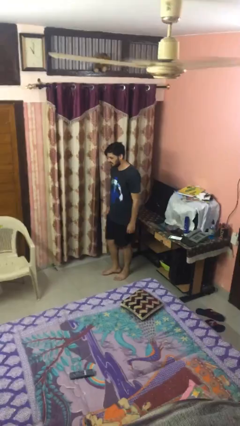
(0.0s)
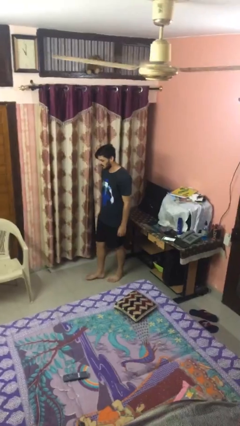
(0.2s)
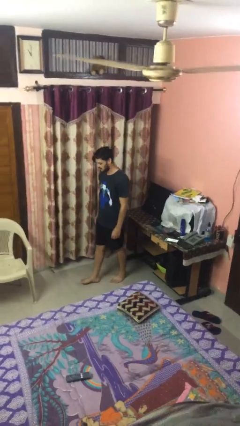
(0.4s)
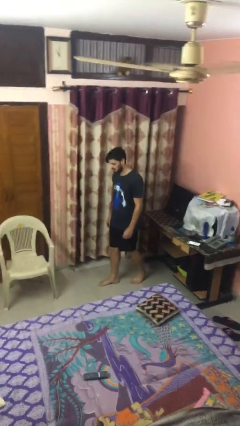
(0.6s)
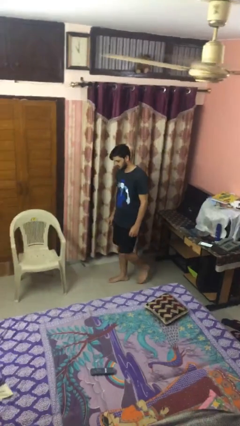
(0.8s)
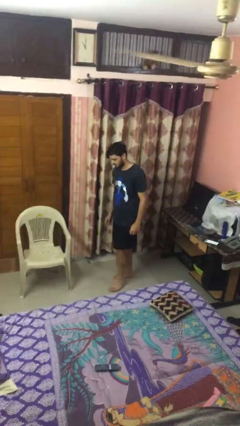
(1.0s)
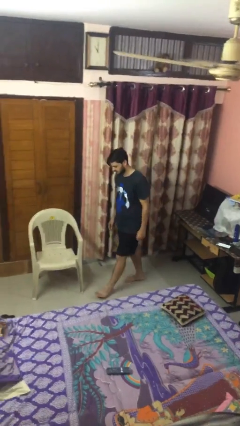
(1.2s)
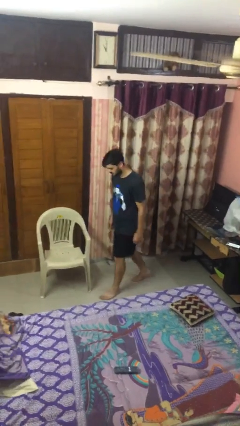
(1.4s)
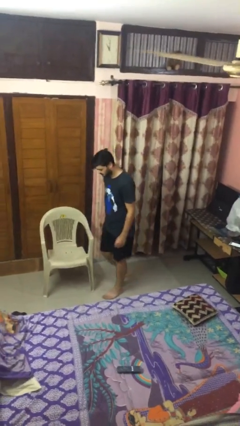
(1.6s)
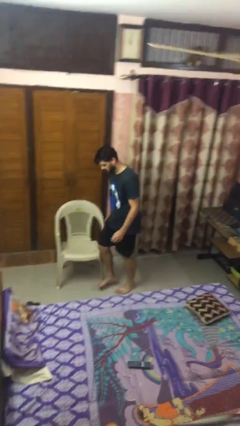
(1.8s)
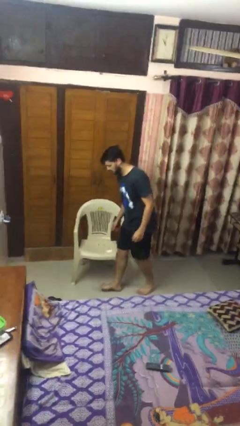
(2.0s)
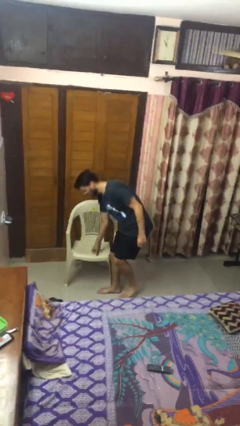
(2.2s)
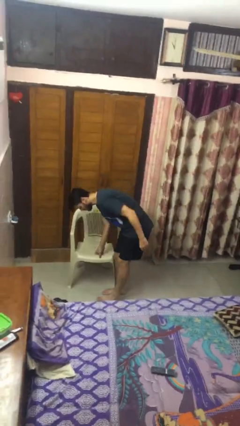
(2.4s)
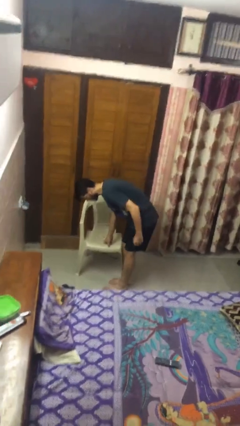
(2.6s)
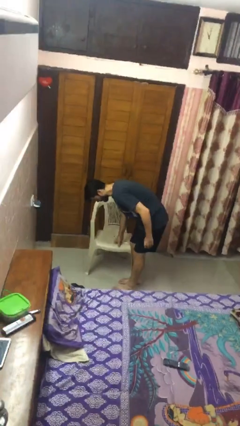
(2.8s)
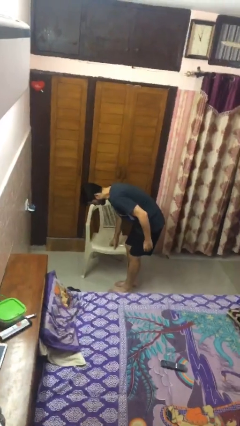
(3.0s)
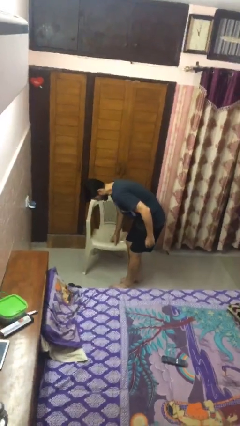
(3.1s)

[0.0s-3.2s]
person stubs toe

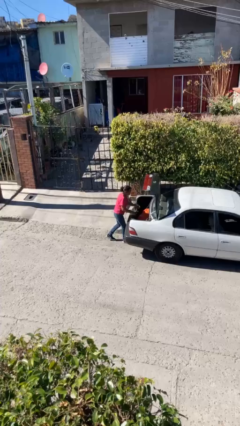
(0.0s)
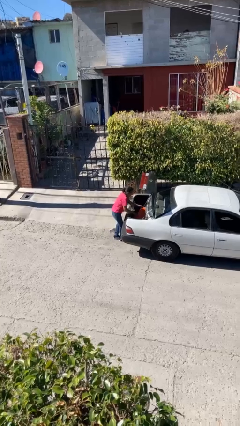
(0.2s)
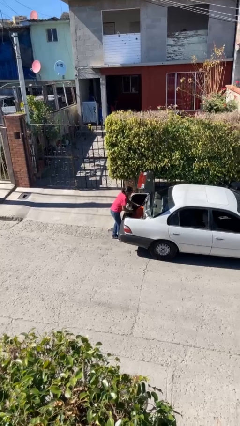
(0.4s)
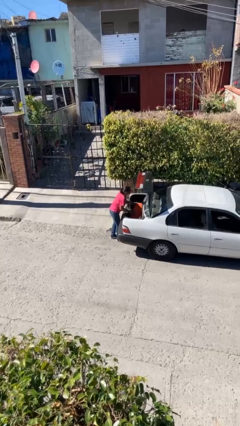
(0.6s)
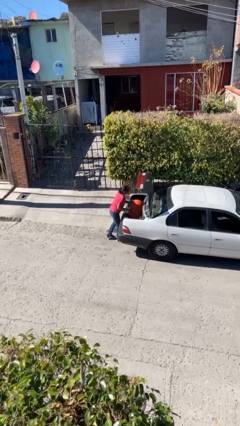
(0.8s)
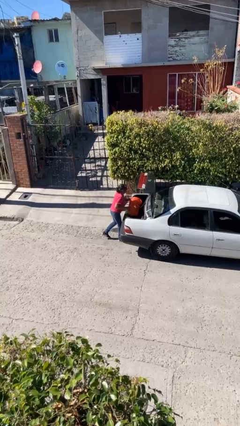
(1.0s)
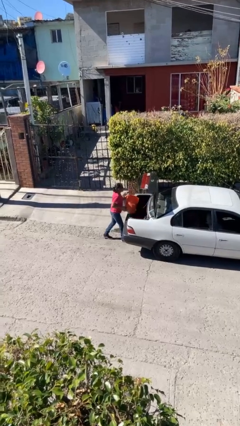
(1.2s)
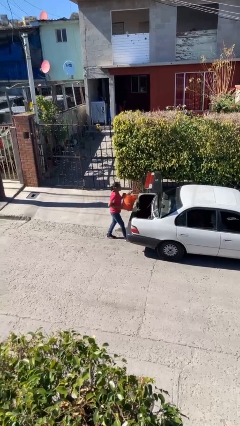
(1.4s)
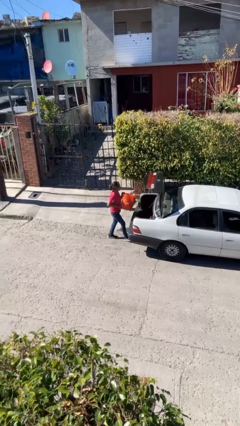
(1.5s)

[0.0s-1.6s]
person unloads car

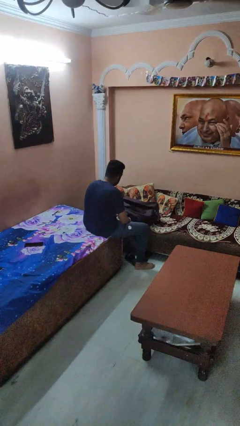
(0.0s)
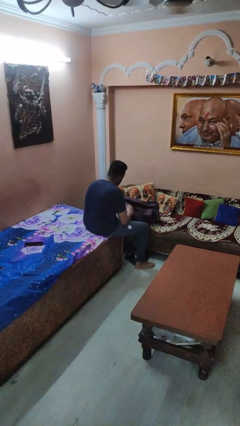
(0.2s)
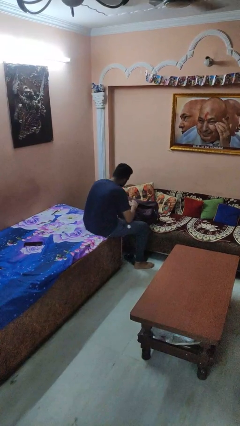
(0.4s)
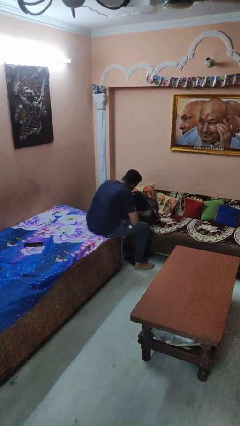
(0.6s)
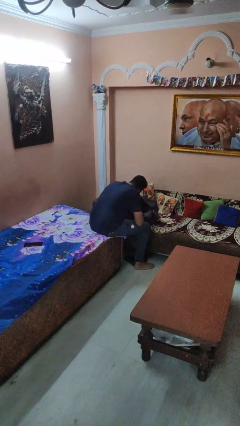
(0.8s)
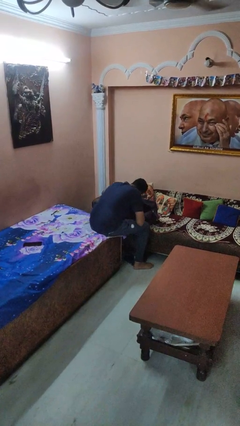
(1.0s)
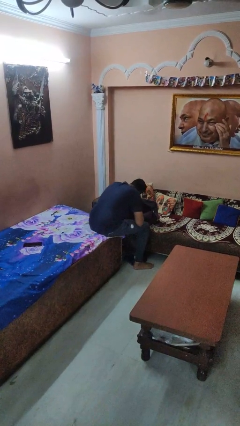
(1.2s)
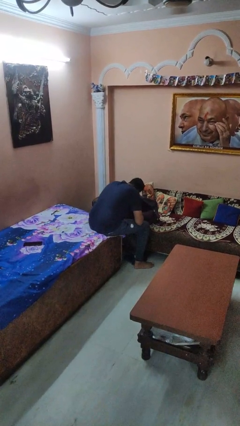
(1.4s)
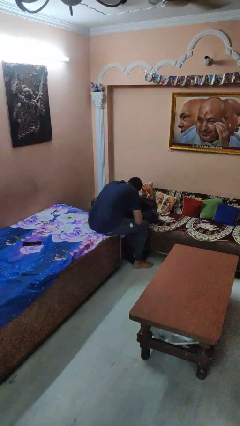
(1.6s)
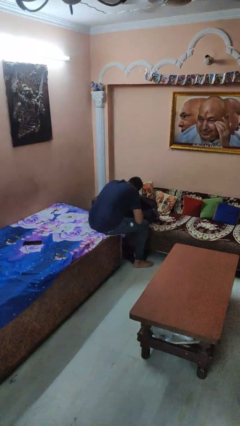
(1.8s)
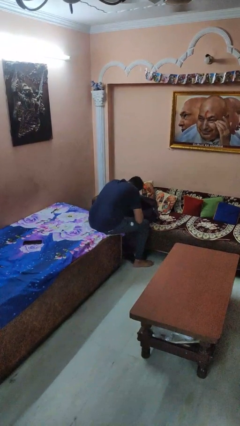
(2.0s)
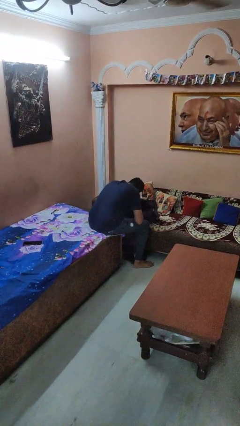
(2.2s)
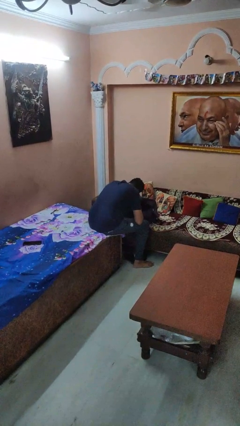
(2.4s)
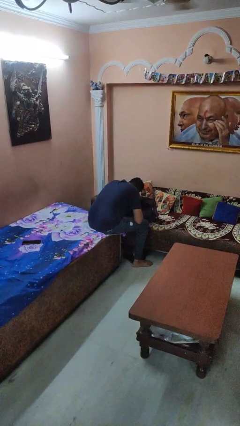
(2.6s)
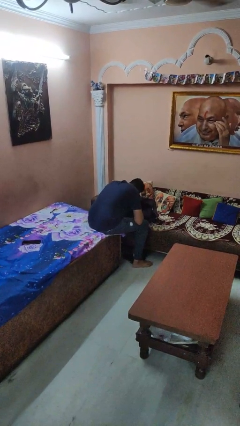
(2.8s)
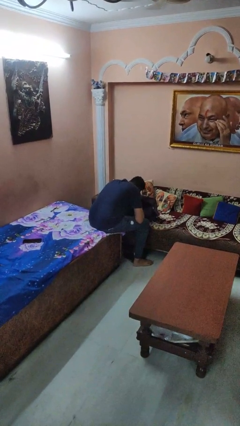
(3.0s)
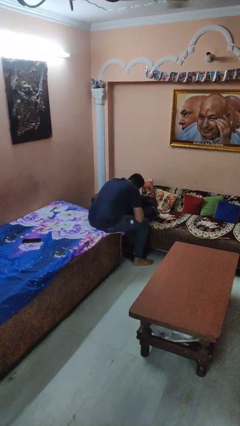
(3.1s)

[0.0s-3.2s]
person searches in bag

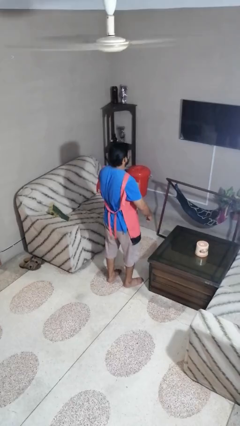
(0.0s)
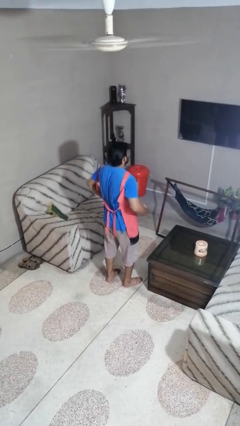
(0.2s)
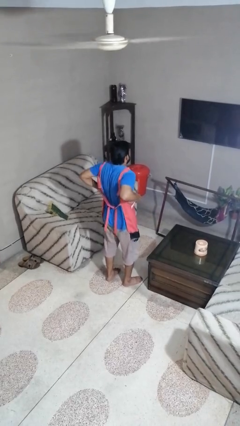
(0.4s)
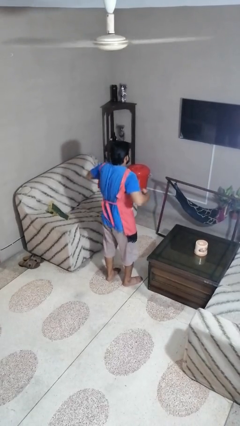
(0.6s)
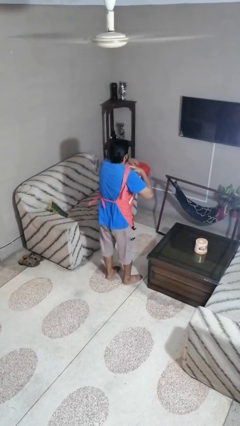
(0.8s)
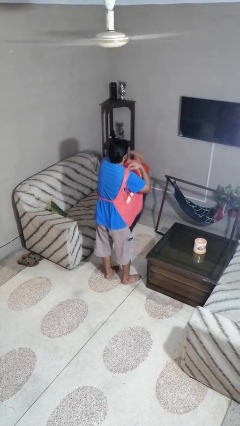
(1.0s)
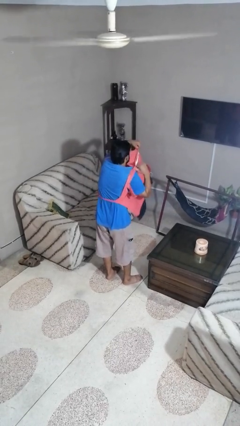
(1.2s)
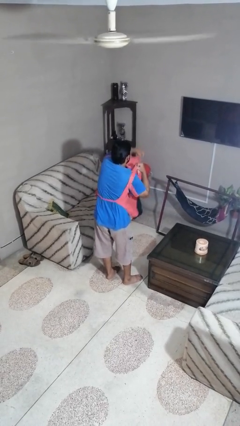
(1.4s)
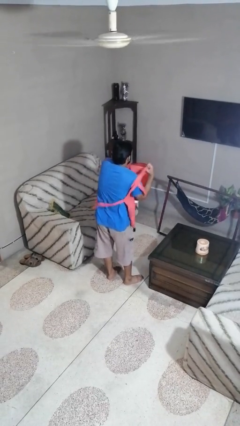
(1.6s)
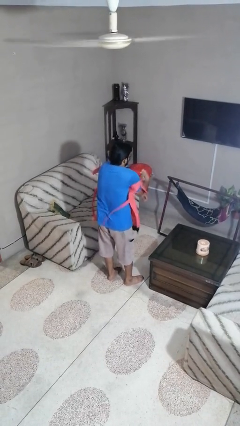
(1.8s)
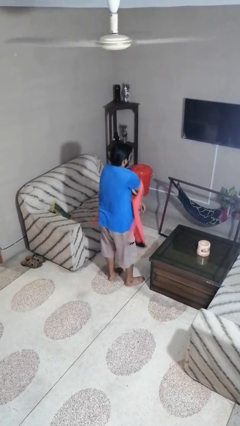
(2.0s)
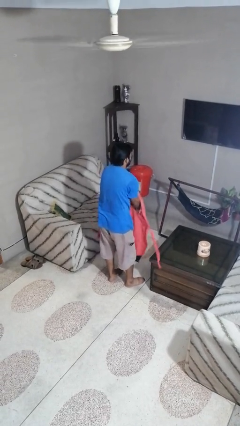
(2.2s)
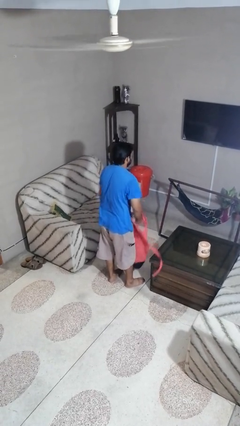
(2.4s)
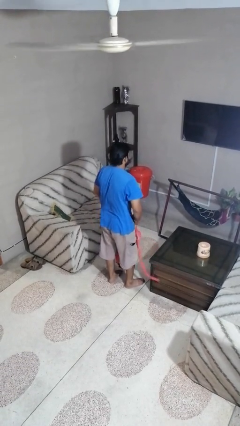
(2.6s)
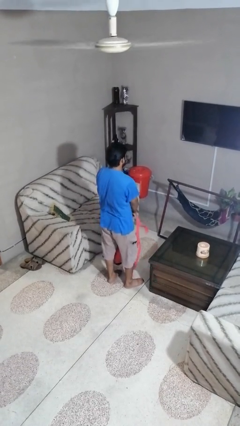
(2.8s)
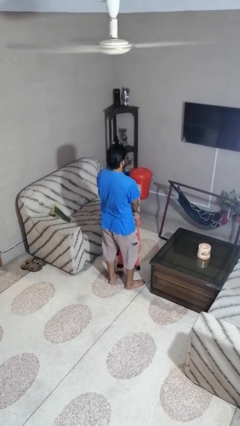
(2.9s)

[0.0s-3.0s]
person takes off apron

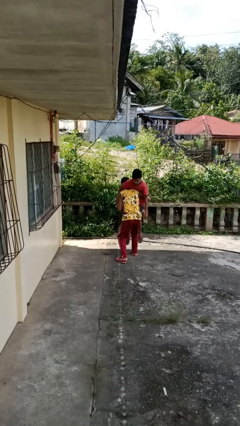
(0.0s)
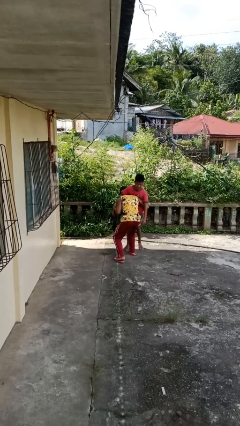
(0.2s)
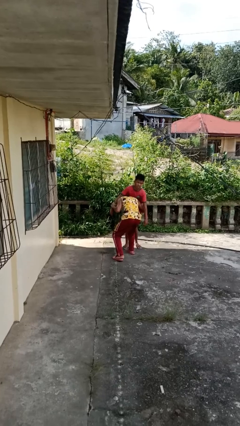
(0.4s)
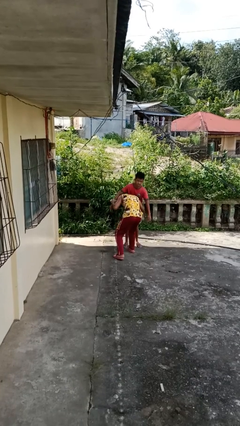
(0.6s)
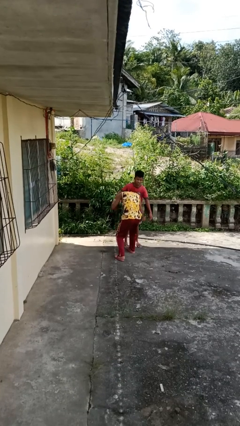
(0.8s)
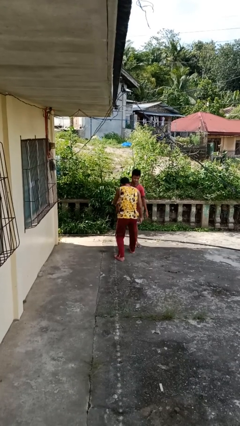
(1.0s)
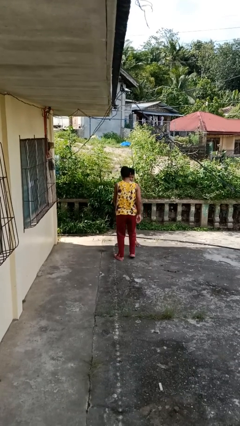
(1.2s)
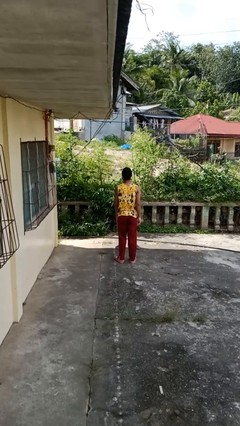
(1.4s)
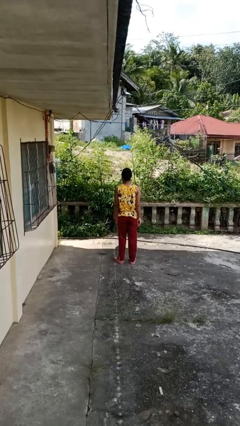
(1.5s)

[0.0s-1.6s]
person puts down person

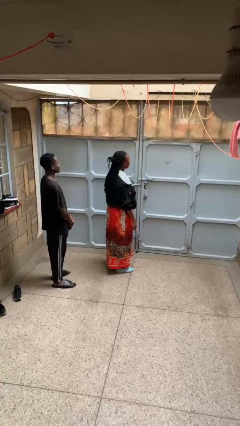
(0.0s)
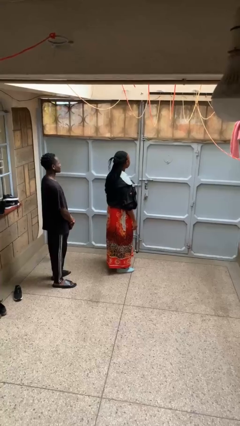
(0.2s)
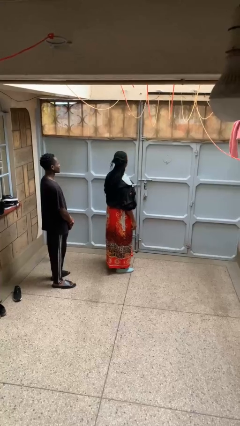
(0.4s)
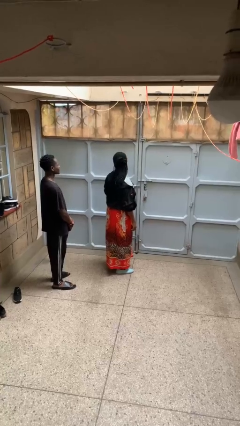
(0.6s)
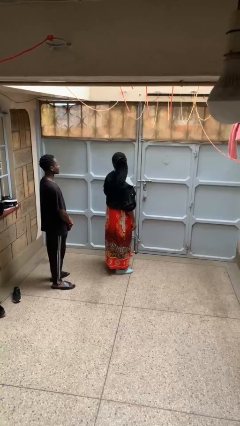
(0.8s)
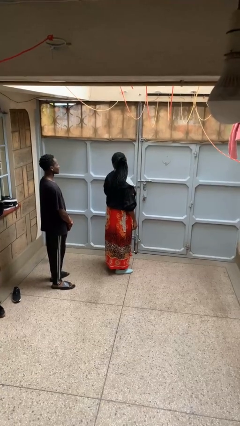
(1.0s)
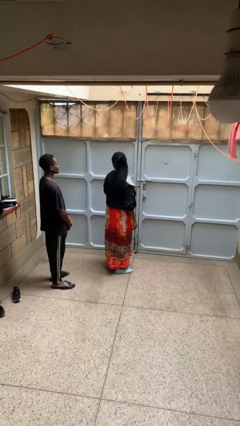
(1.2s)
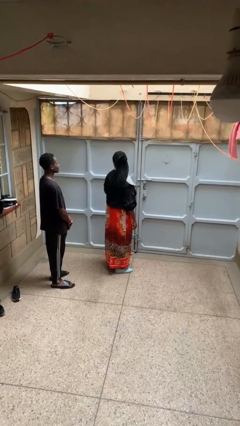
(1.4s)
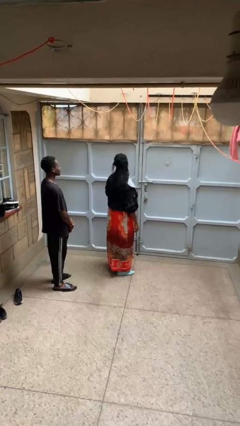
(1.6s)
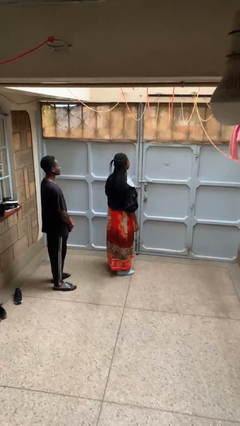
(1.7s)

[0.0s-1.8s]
person looks over shoulder

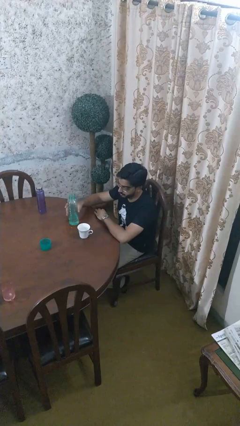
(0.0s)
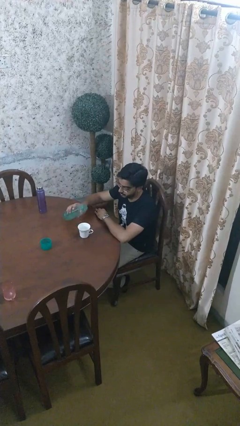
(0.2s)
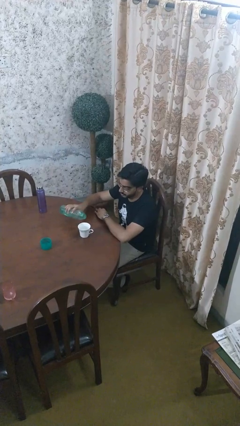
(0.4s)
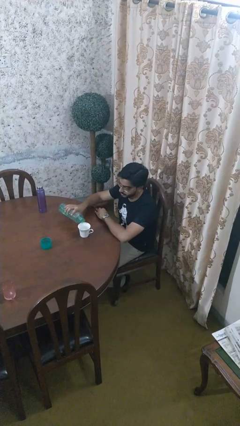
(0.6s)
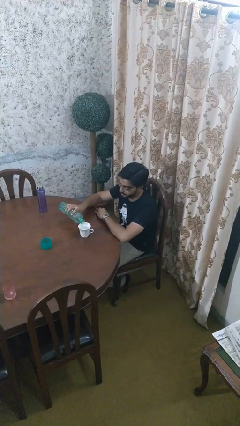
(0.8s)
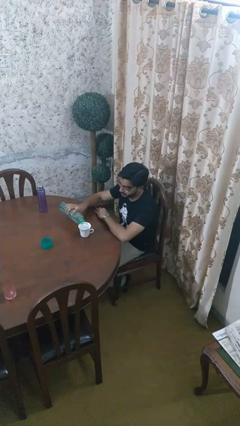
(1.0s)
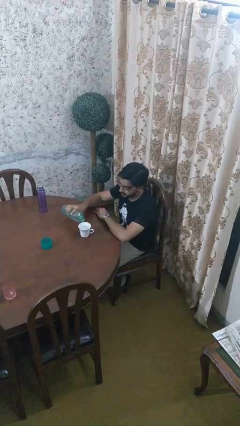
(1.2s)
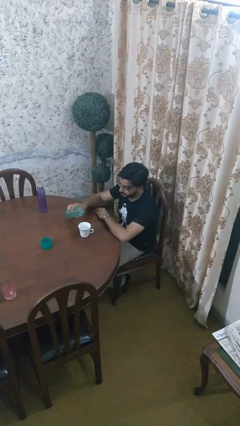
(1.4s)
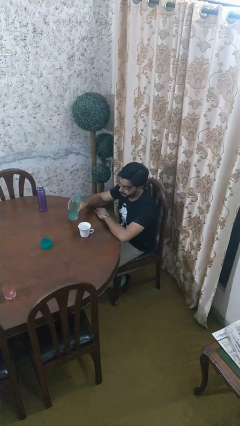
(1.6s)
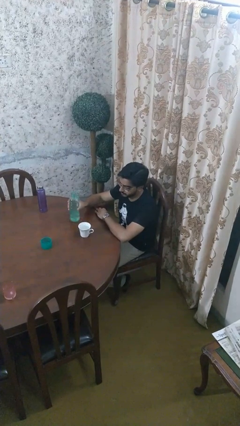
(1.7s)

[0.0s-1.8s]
person pours liquid into cup

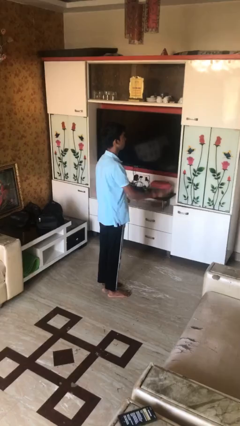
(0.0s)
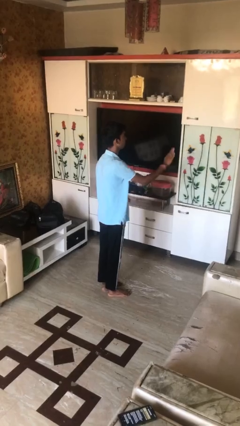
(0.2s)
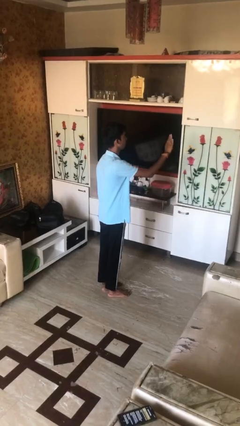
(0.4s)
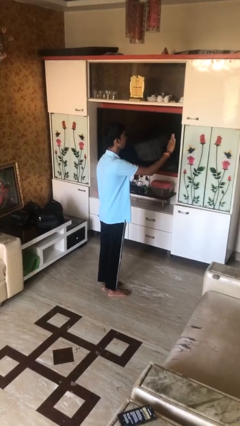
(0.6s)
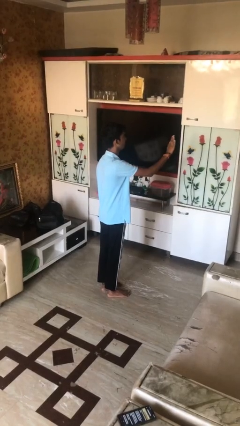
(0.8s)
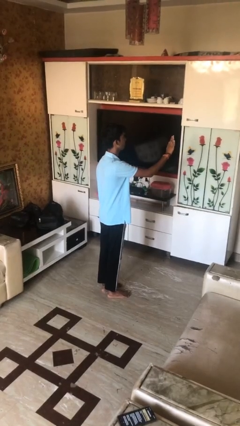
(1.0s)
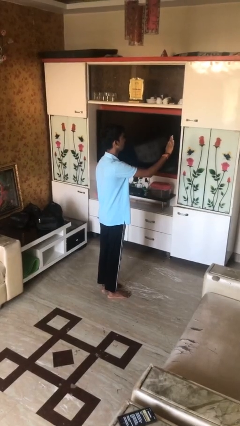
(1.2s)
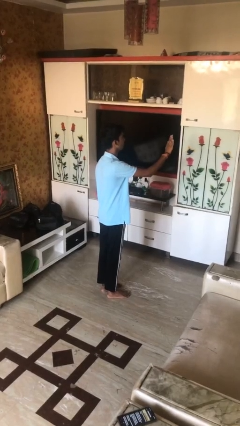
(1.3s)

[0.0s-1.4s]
person gestures swipe up
